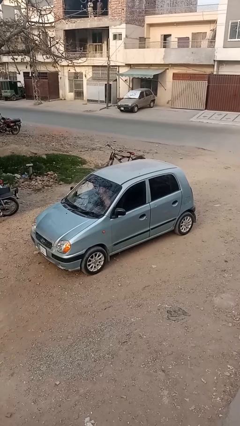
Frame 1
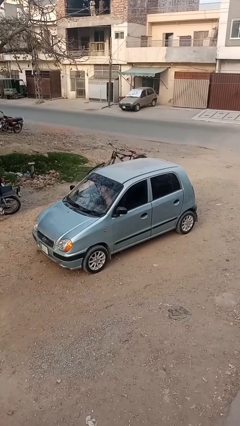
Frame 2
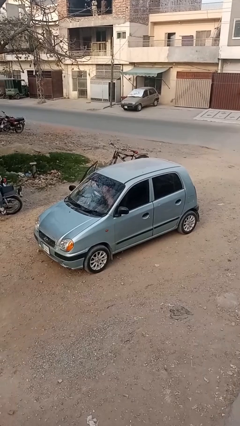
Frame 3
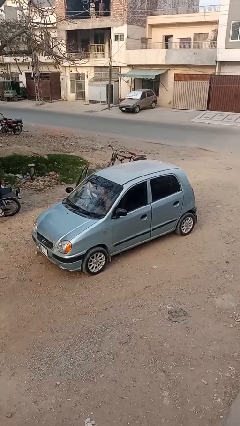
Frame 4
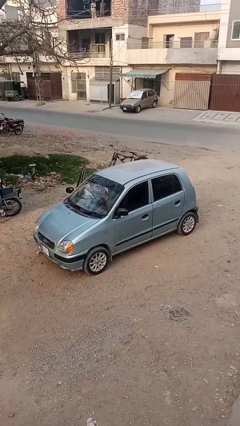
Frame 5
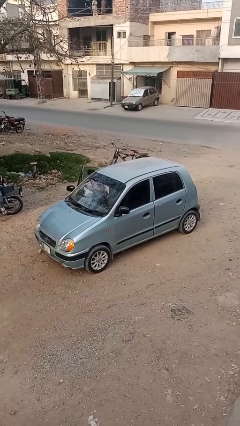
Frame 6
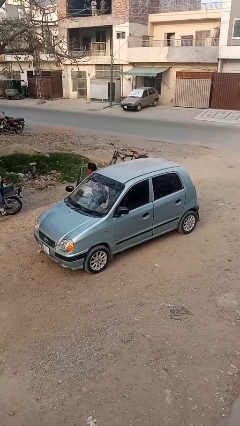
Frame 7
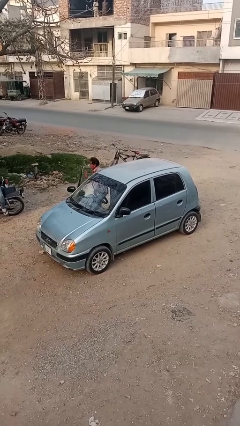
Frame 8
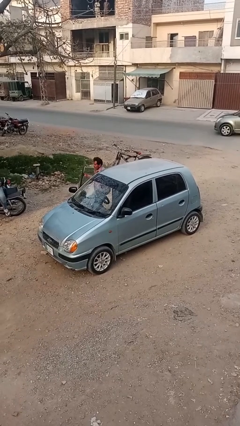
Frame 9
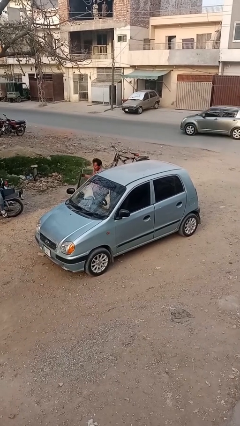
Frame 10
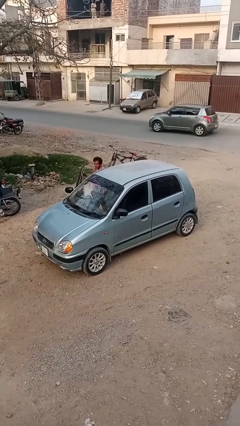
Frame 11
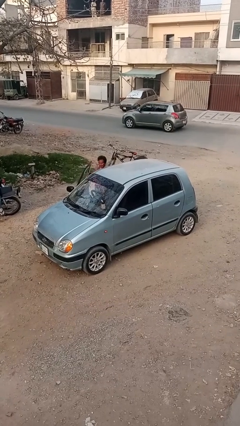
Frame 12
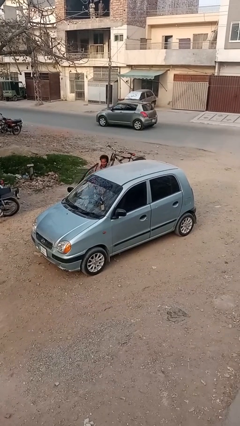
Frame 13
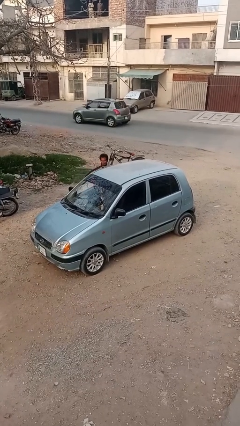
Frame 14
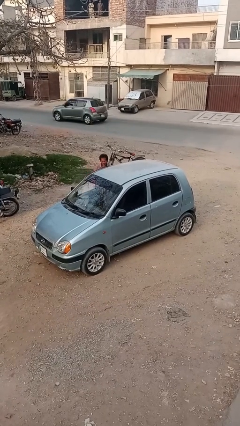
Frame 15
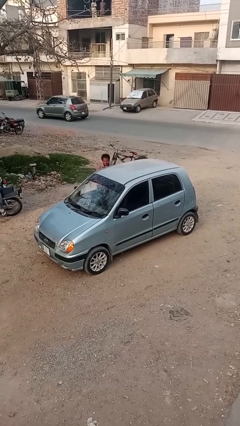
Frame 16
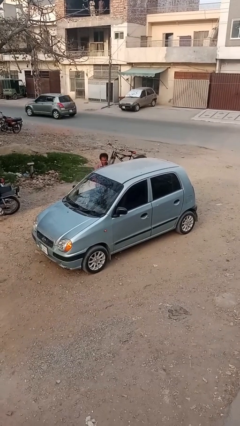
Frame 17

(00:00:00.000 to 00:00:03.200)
car drops off person

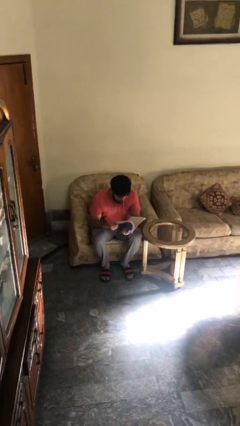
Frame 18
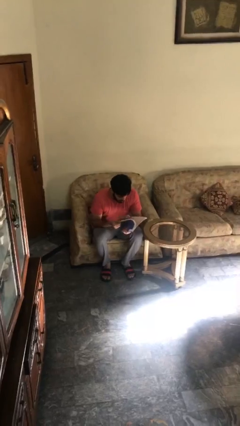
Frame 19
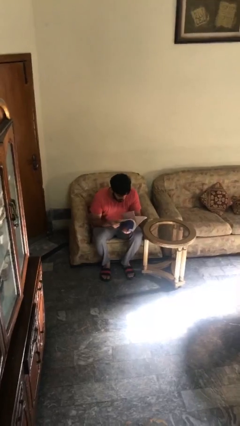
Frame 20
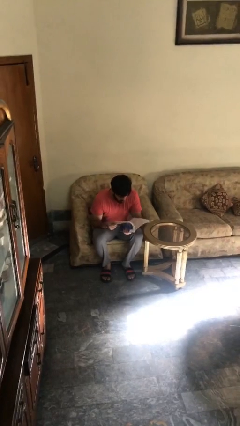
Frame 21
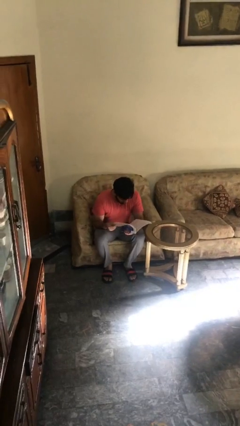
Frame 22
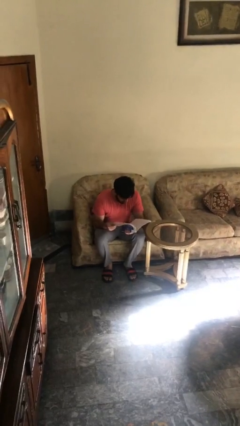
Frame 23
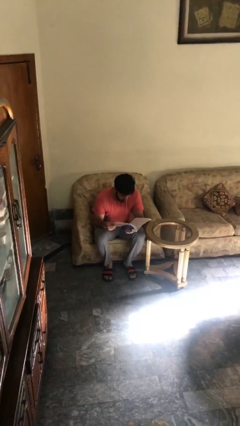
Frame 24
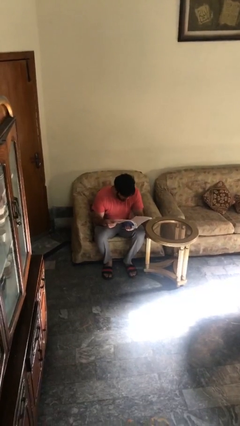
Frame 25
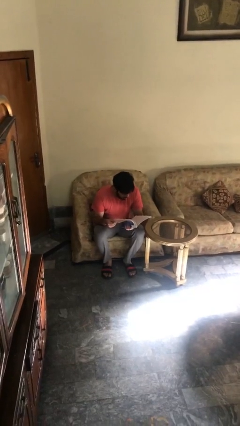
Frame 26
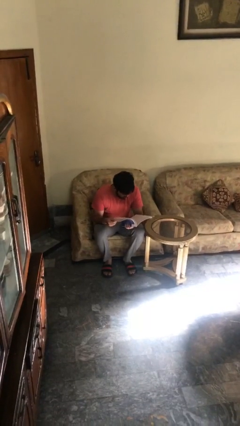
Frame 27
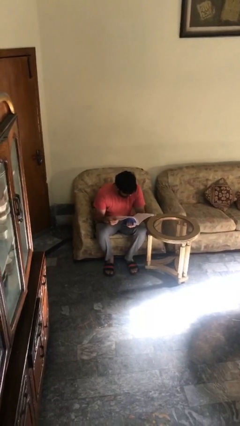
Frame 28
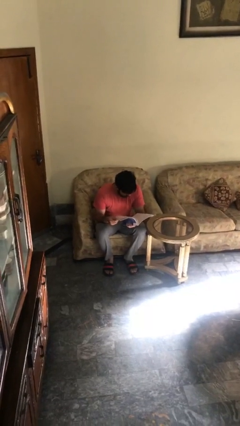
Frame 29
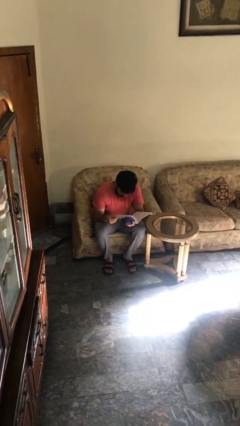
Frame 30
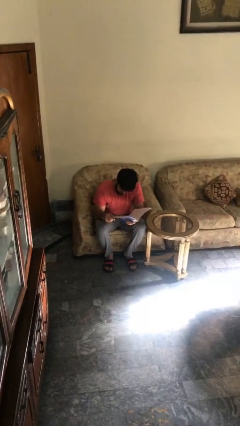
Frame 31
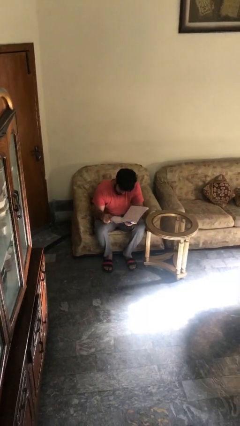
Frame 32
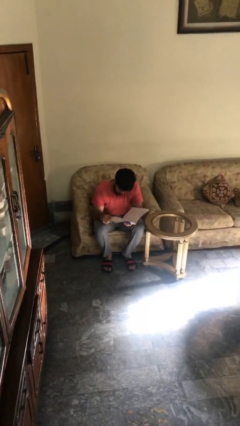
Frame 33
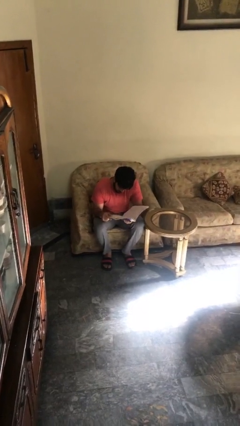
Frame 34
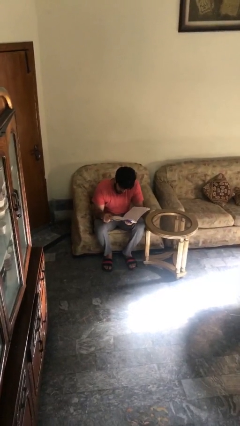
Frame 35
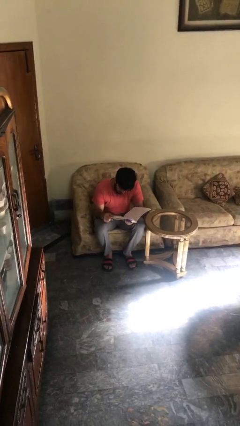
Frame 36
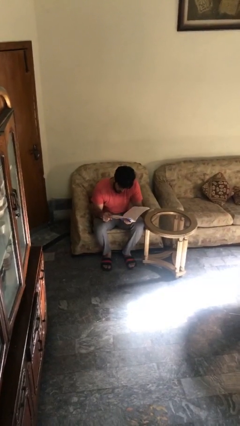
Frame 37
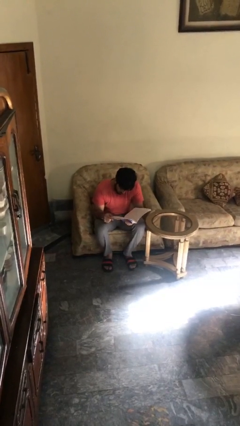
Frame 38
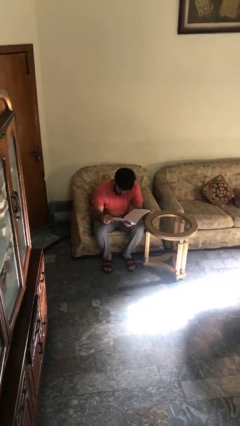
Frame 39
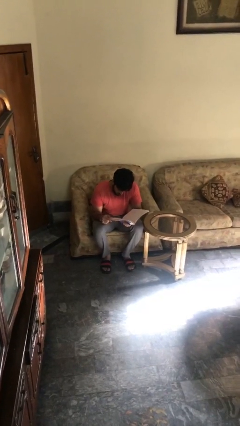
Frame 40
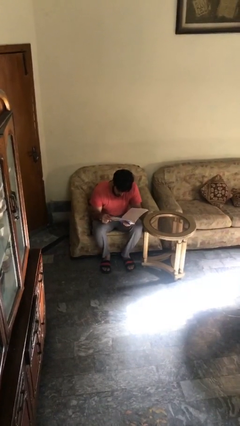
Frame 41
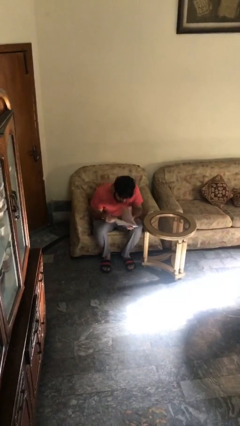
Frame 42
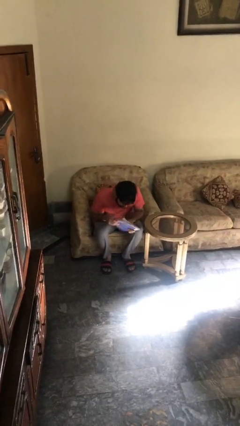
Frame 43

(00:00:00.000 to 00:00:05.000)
person reads document

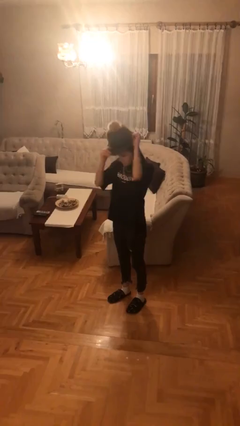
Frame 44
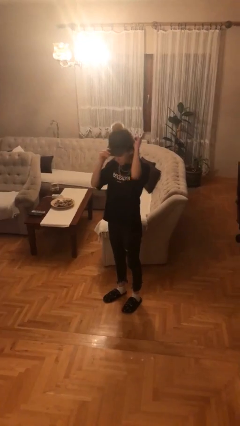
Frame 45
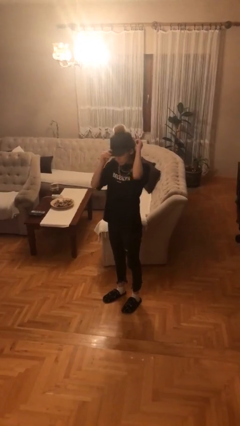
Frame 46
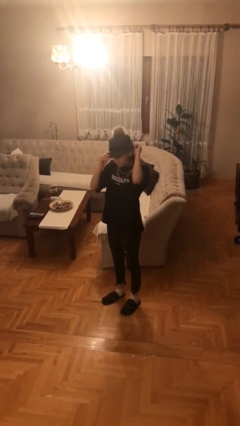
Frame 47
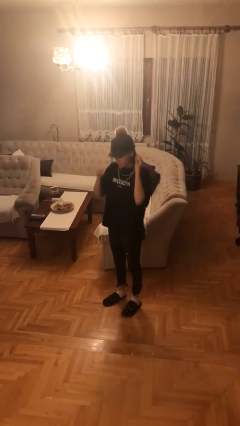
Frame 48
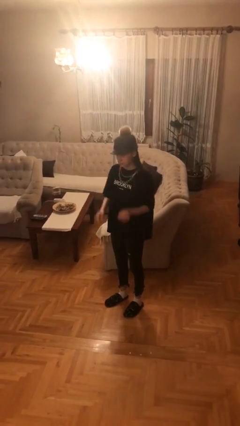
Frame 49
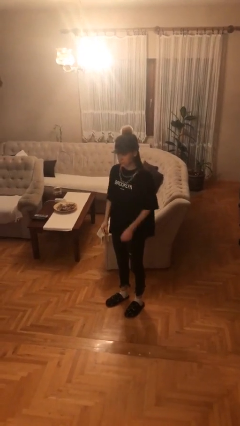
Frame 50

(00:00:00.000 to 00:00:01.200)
person puts on hat

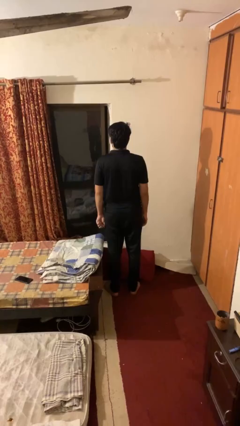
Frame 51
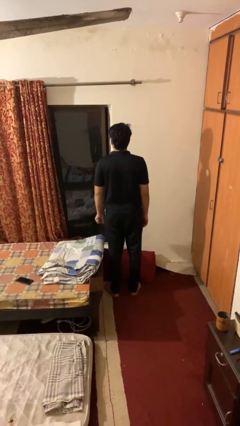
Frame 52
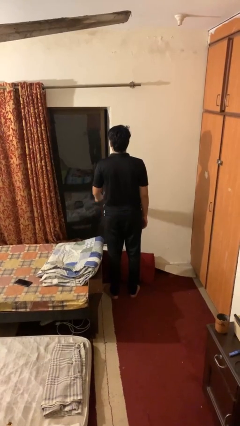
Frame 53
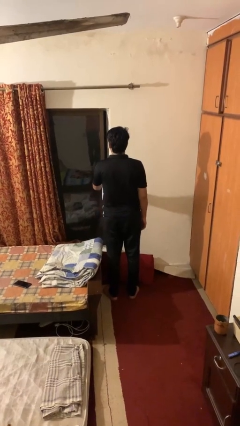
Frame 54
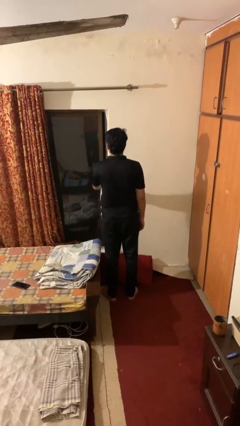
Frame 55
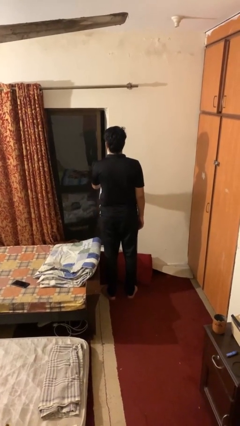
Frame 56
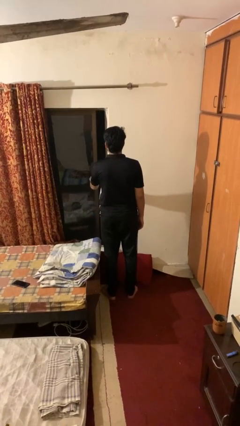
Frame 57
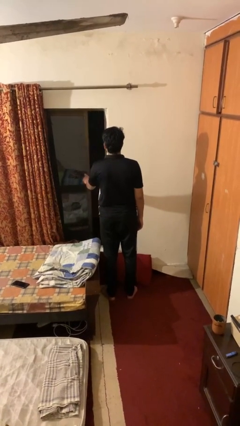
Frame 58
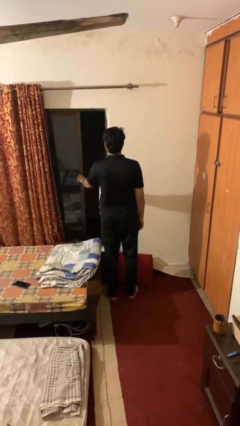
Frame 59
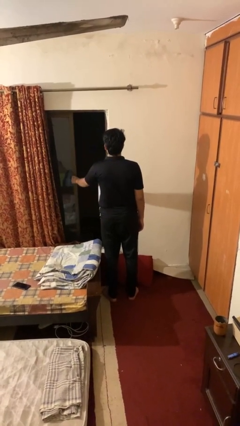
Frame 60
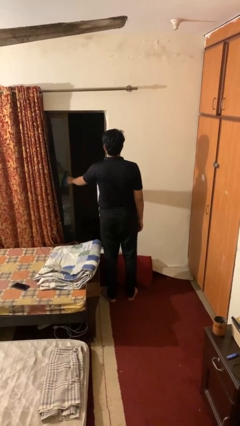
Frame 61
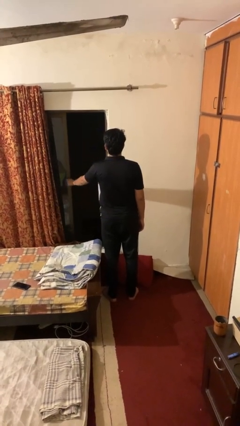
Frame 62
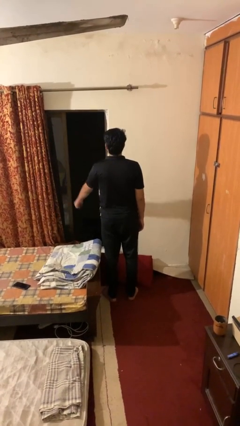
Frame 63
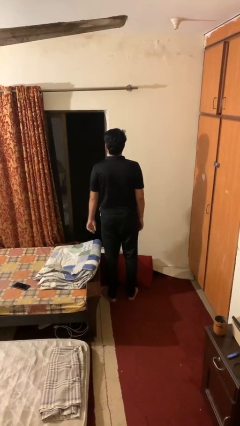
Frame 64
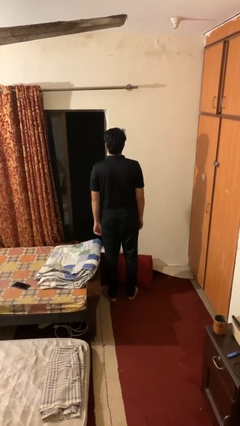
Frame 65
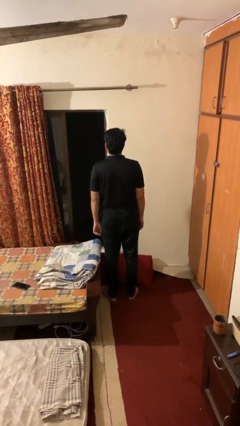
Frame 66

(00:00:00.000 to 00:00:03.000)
person opens home window

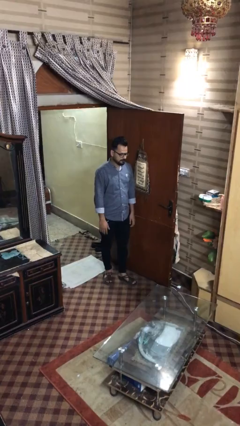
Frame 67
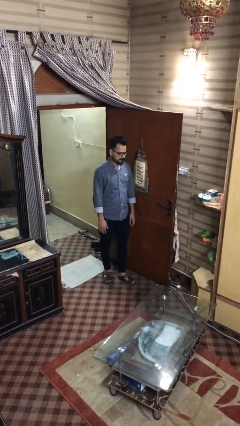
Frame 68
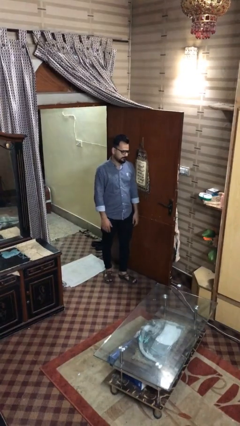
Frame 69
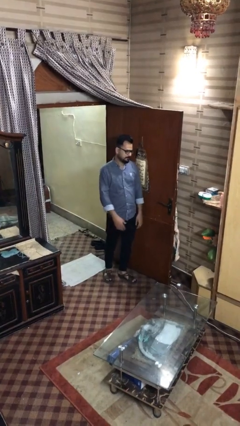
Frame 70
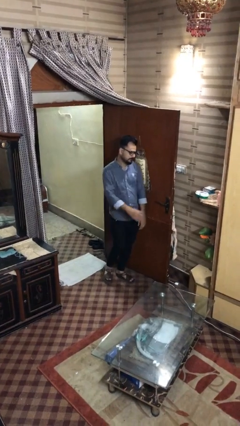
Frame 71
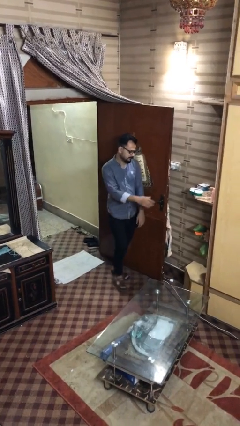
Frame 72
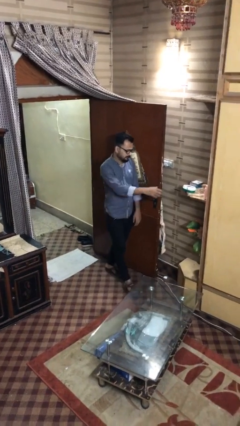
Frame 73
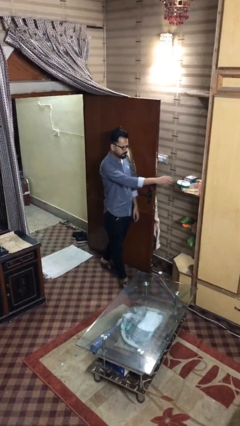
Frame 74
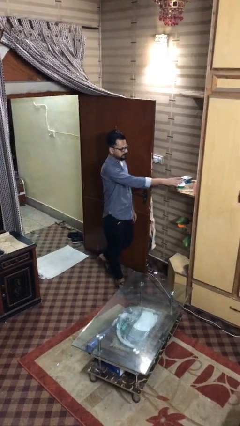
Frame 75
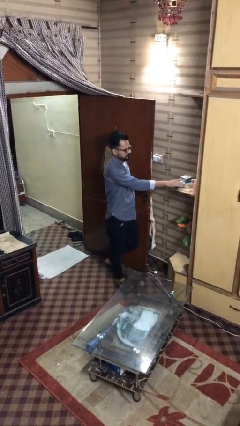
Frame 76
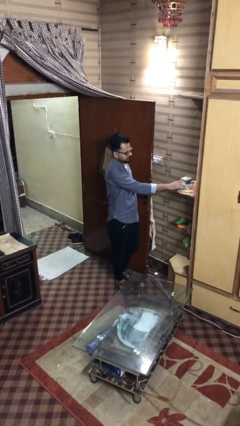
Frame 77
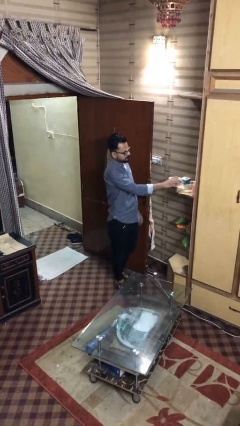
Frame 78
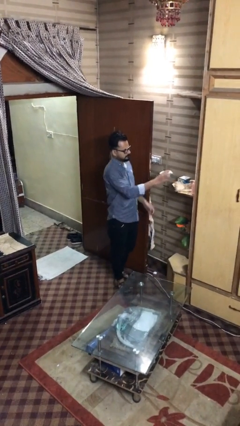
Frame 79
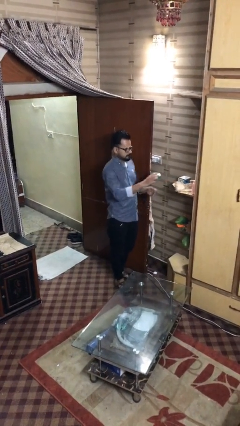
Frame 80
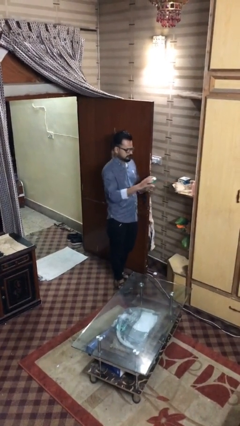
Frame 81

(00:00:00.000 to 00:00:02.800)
person picks up object from shelf

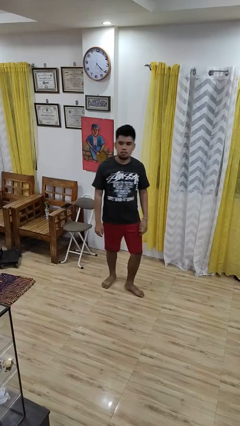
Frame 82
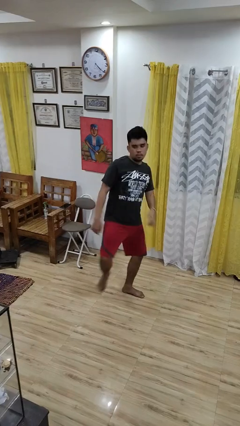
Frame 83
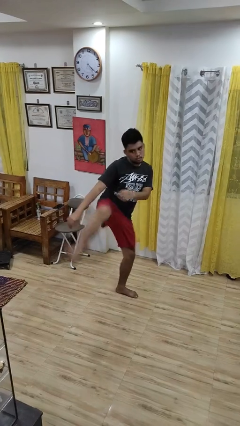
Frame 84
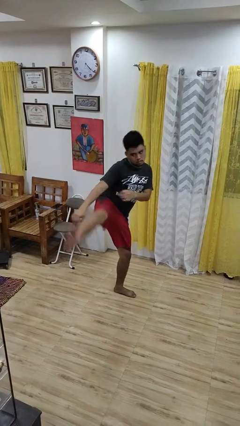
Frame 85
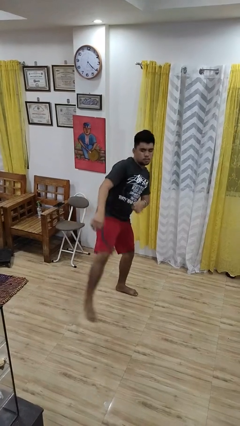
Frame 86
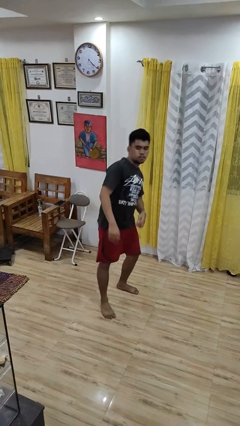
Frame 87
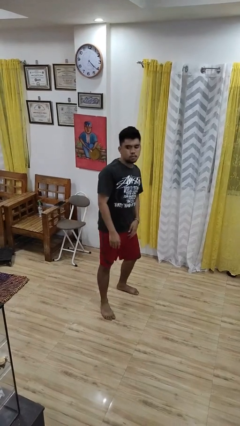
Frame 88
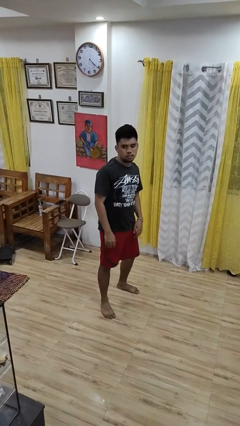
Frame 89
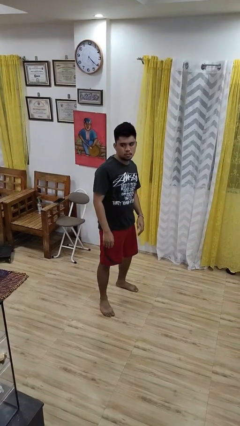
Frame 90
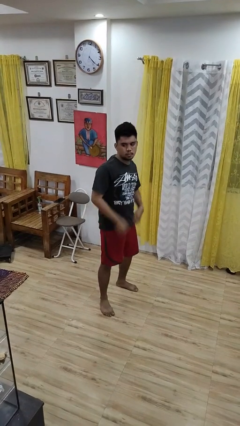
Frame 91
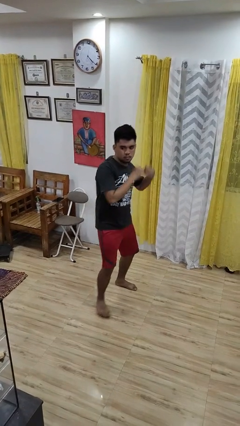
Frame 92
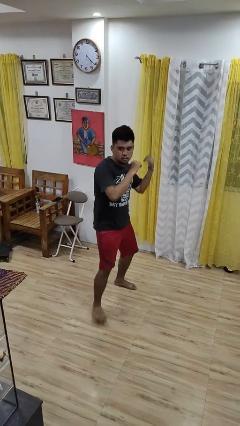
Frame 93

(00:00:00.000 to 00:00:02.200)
person karate kicks
